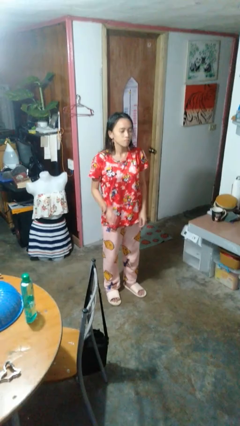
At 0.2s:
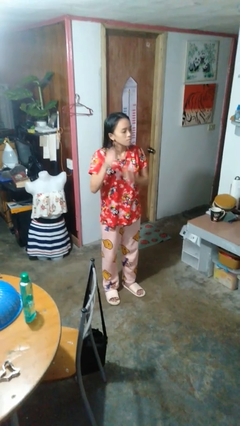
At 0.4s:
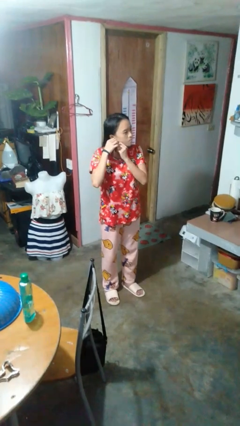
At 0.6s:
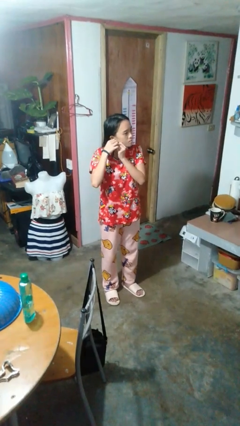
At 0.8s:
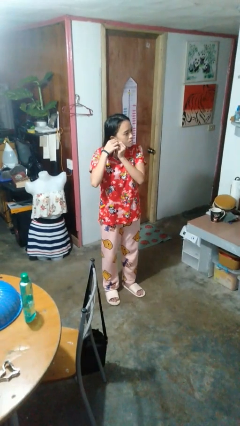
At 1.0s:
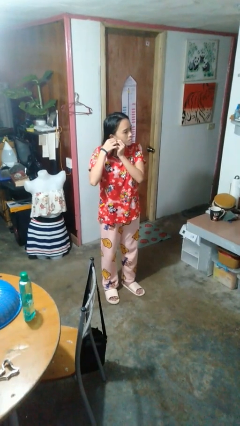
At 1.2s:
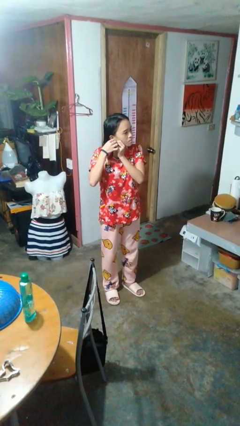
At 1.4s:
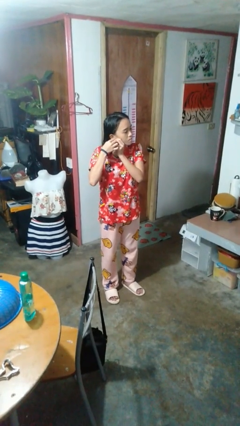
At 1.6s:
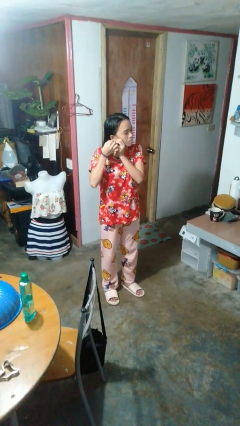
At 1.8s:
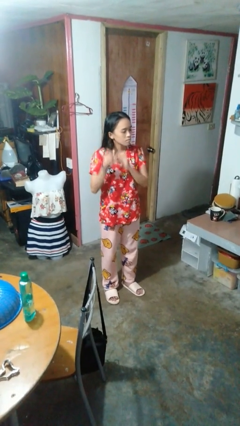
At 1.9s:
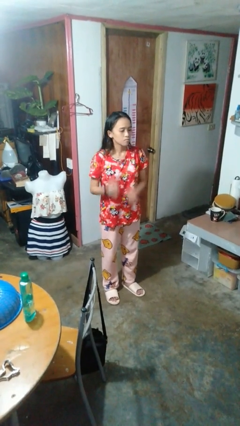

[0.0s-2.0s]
person takes off earrings

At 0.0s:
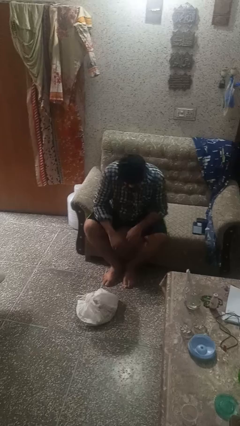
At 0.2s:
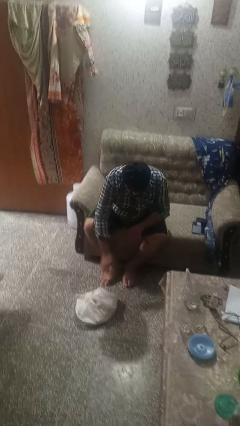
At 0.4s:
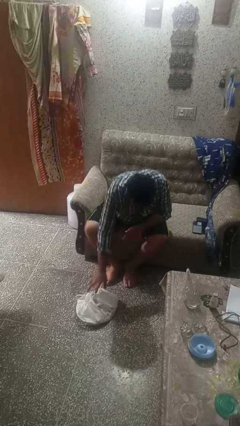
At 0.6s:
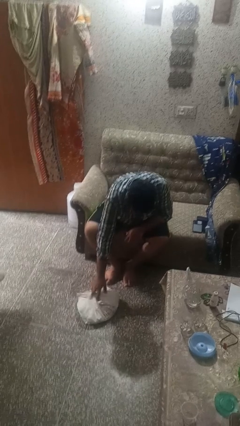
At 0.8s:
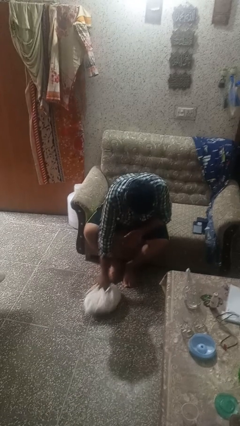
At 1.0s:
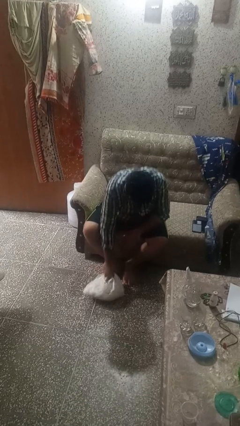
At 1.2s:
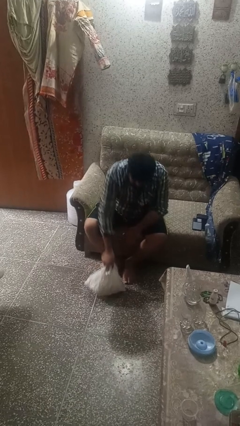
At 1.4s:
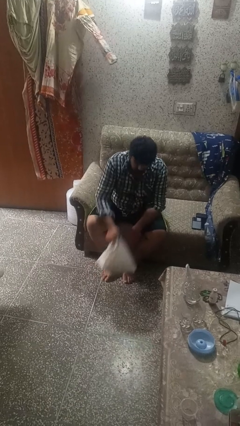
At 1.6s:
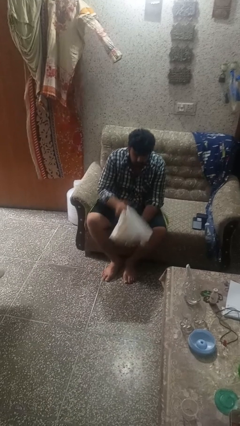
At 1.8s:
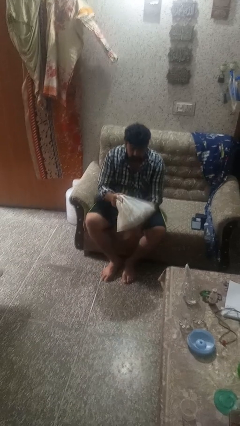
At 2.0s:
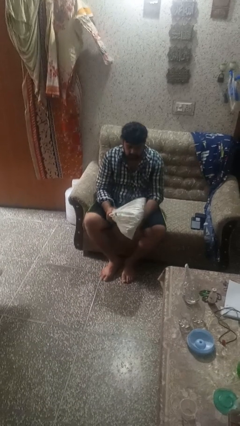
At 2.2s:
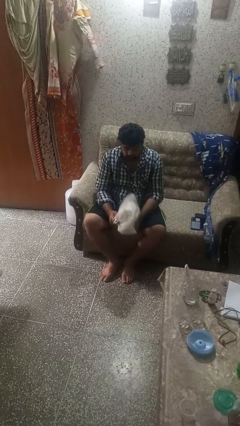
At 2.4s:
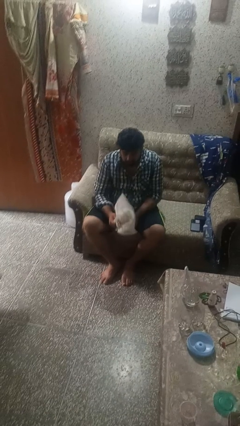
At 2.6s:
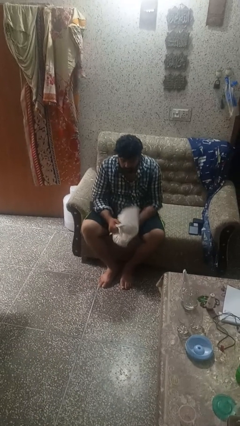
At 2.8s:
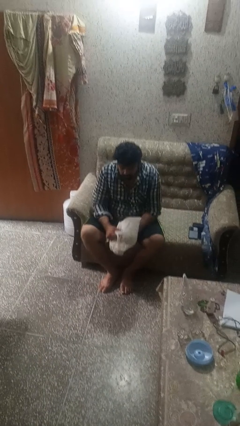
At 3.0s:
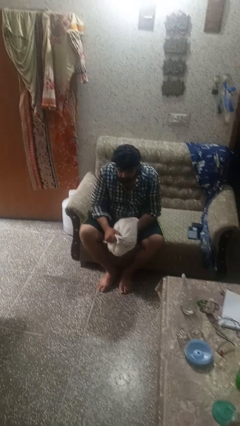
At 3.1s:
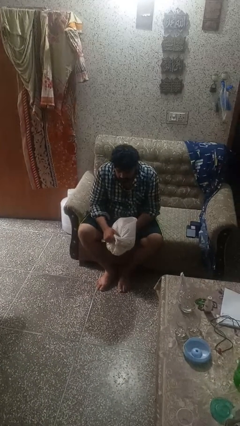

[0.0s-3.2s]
person picks up object from floor

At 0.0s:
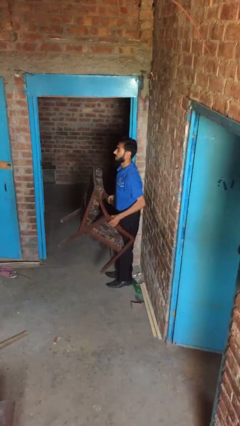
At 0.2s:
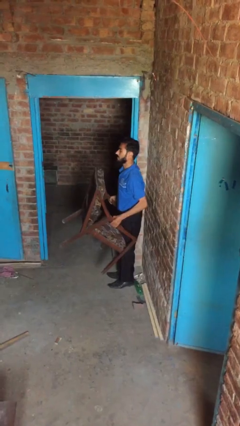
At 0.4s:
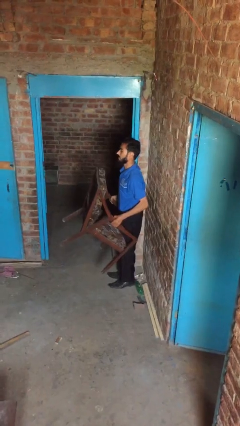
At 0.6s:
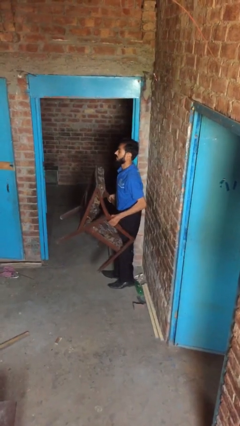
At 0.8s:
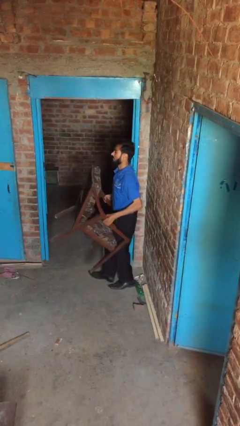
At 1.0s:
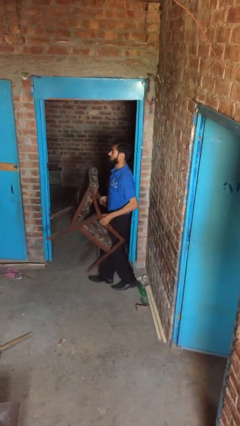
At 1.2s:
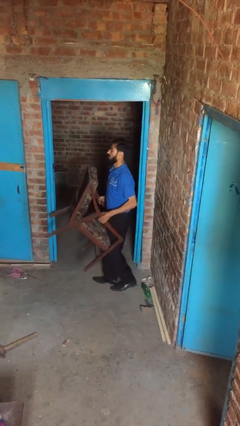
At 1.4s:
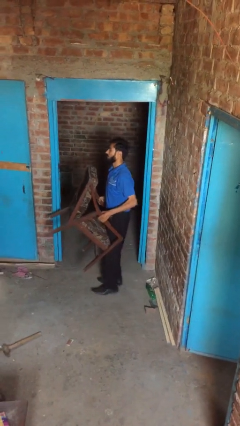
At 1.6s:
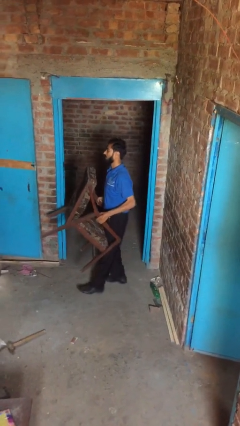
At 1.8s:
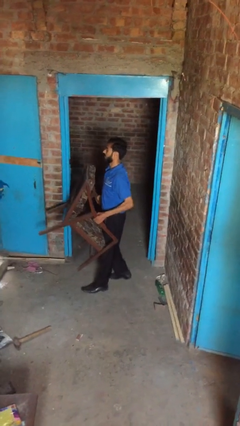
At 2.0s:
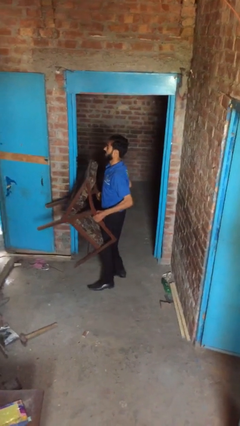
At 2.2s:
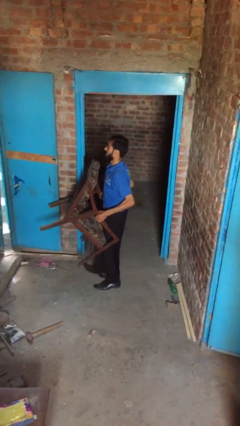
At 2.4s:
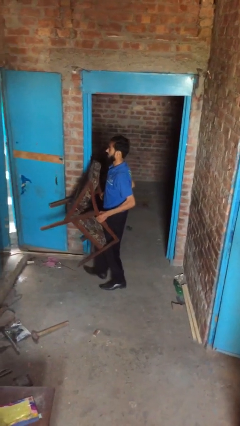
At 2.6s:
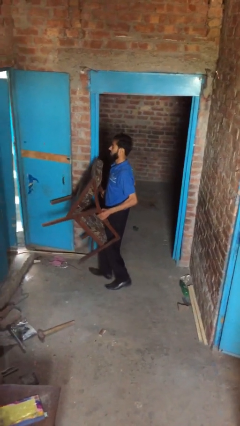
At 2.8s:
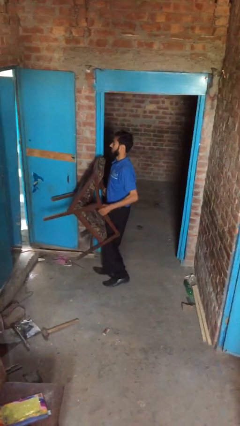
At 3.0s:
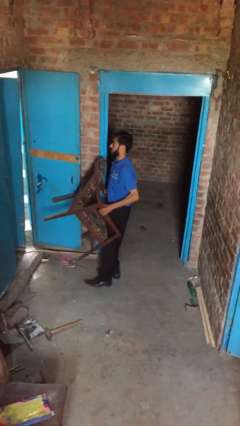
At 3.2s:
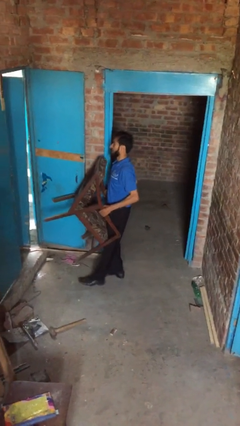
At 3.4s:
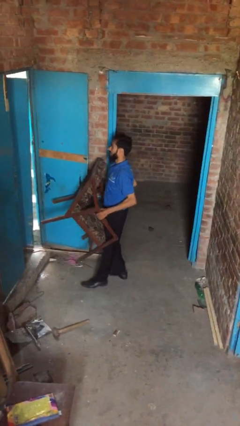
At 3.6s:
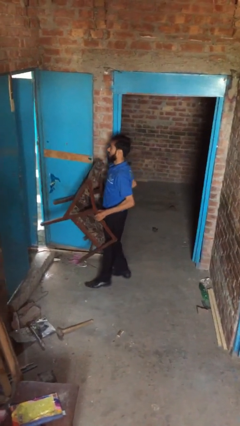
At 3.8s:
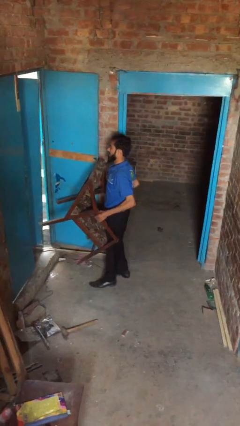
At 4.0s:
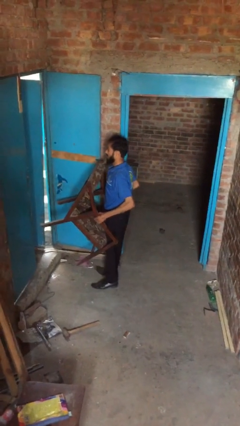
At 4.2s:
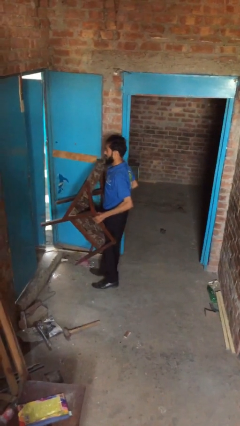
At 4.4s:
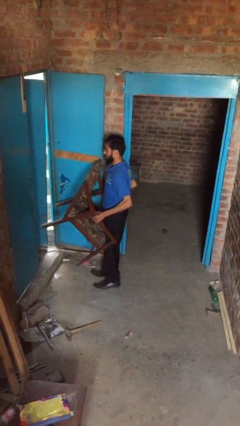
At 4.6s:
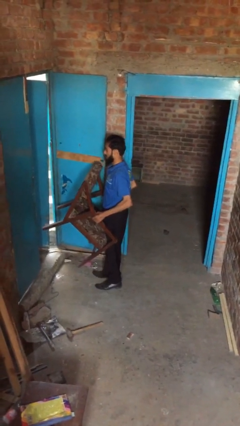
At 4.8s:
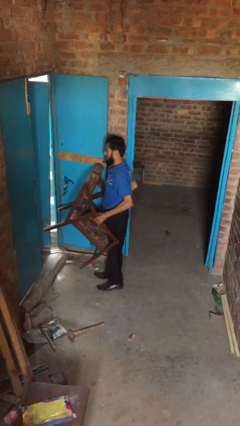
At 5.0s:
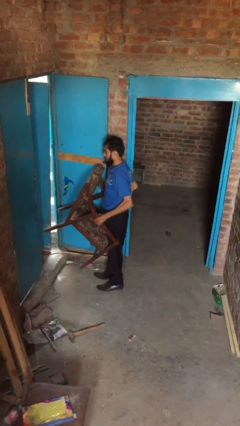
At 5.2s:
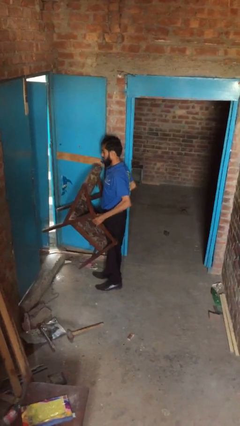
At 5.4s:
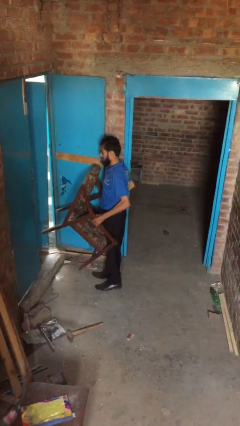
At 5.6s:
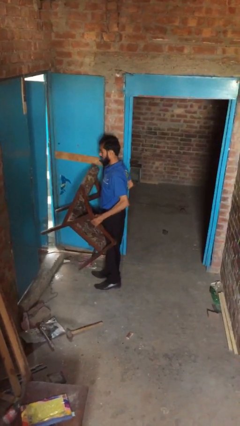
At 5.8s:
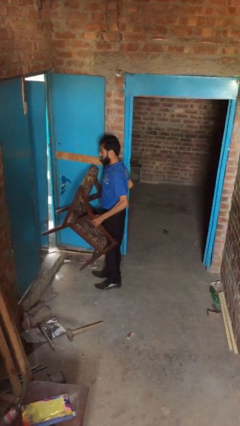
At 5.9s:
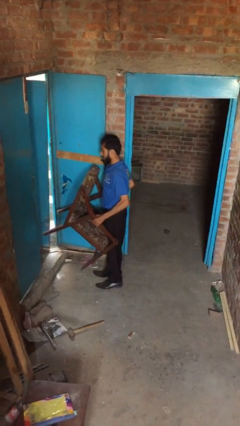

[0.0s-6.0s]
person carries heavy object

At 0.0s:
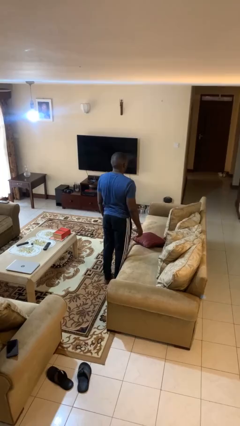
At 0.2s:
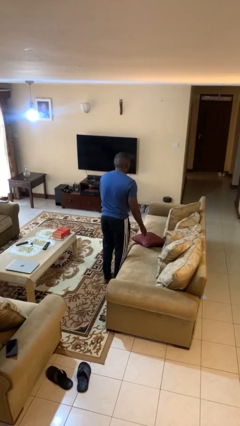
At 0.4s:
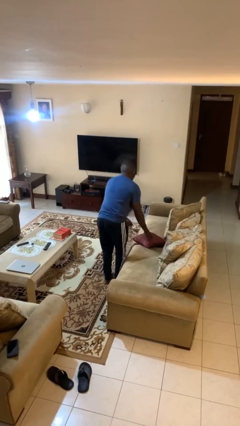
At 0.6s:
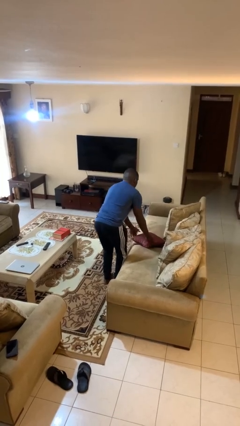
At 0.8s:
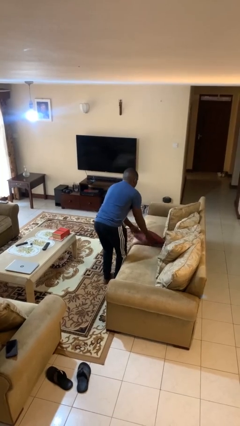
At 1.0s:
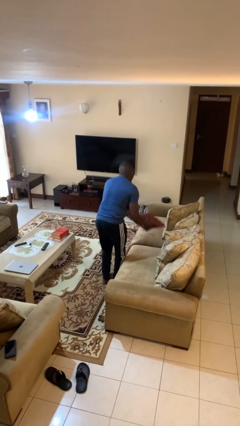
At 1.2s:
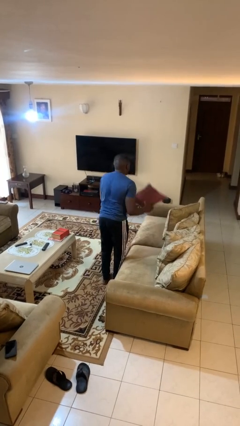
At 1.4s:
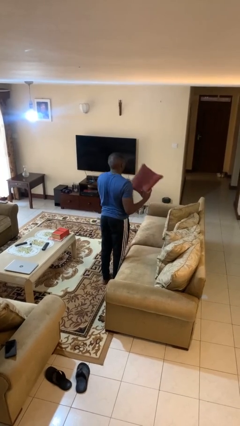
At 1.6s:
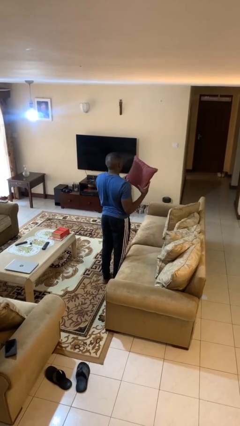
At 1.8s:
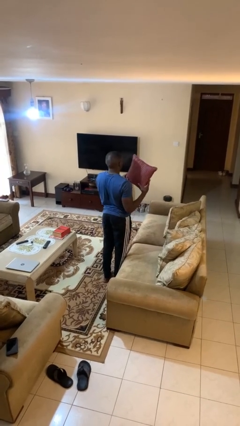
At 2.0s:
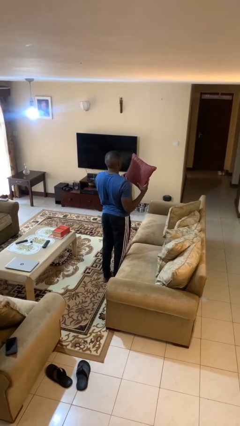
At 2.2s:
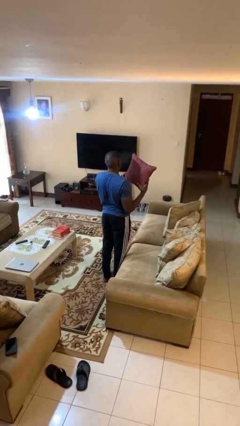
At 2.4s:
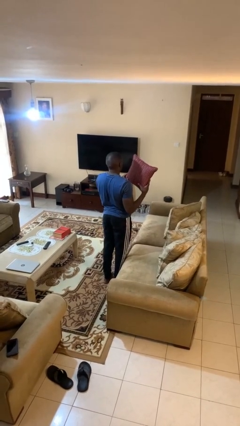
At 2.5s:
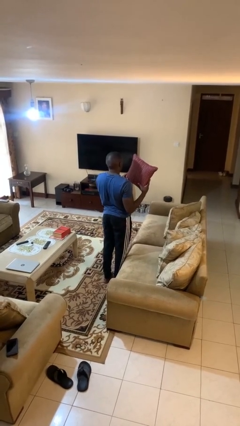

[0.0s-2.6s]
person picks up object from couch

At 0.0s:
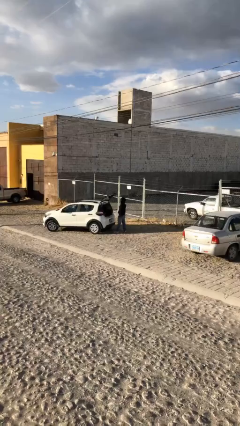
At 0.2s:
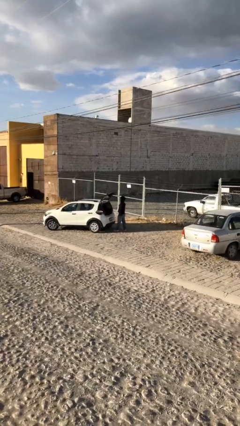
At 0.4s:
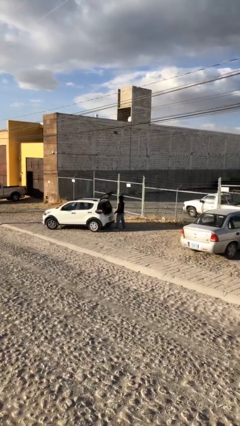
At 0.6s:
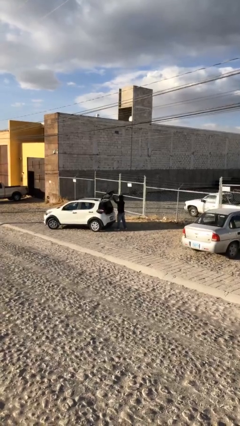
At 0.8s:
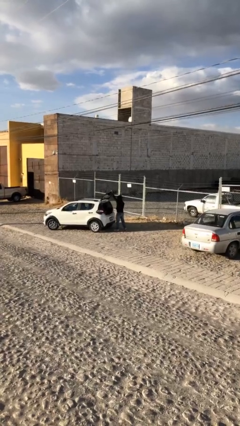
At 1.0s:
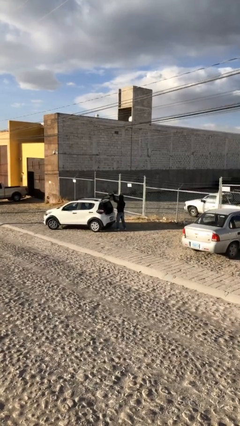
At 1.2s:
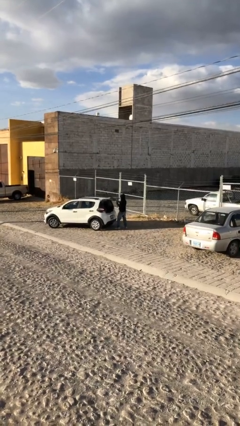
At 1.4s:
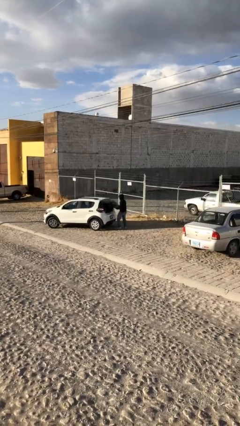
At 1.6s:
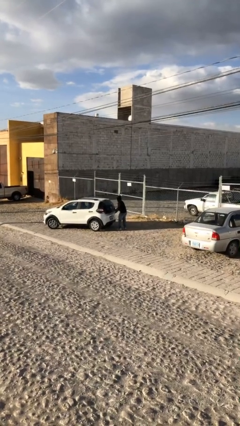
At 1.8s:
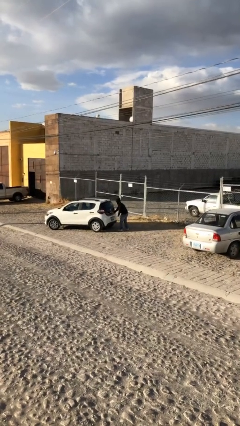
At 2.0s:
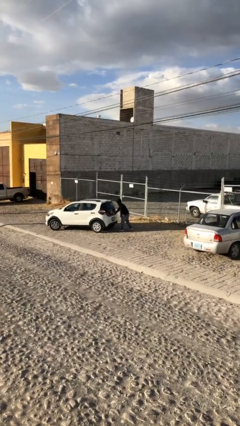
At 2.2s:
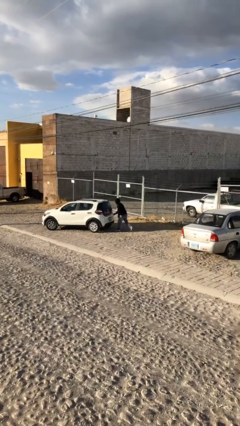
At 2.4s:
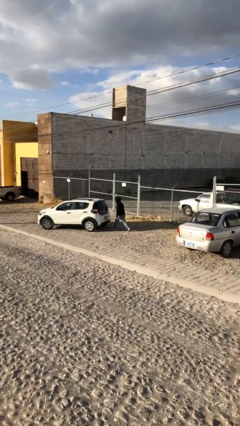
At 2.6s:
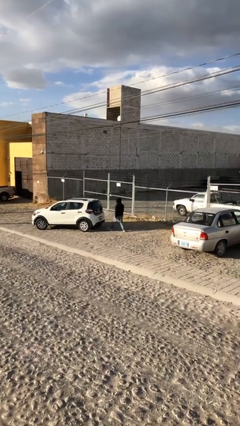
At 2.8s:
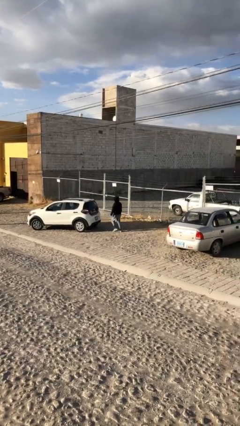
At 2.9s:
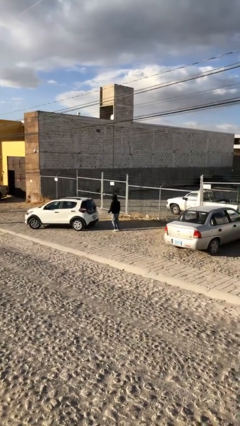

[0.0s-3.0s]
person closes car trunk
